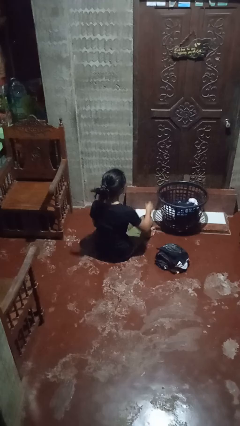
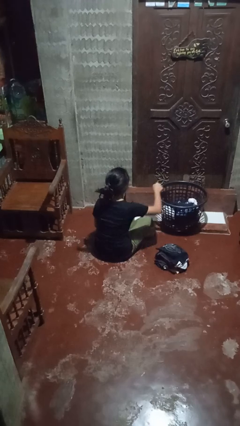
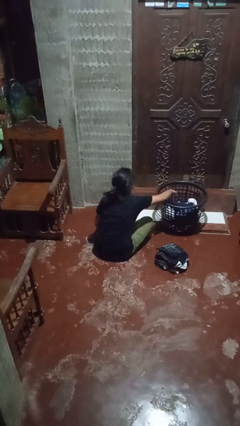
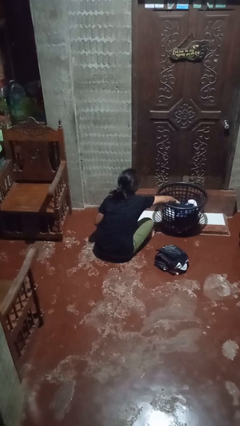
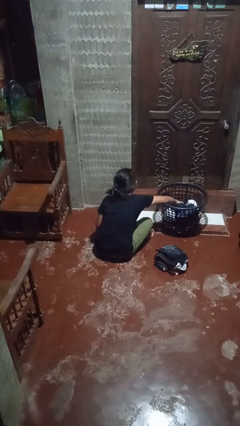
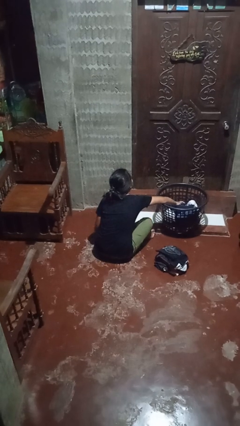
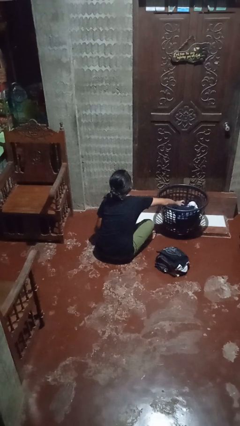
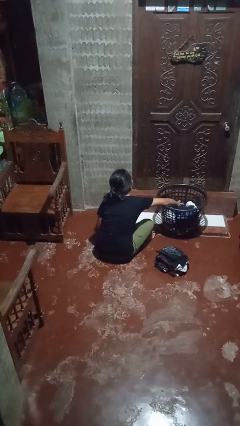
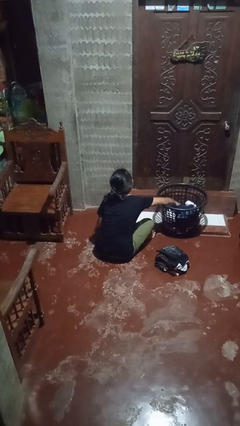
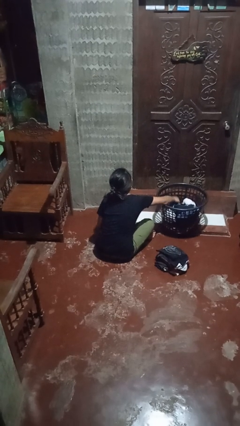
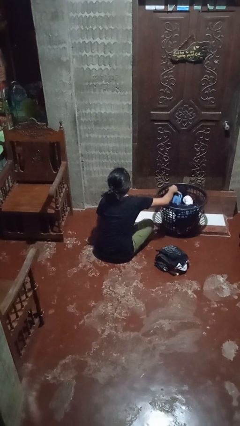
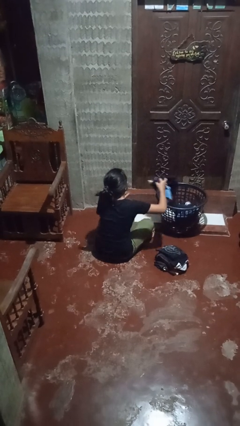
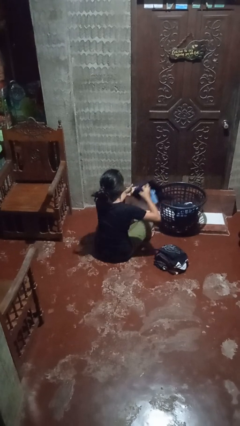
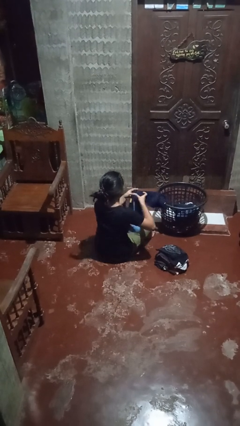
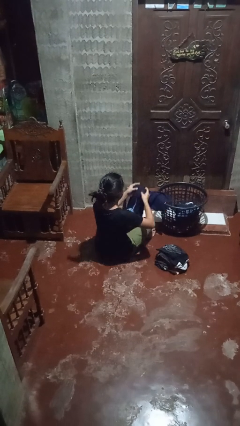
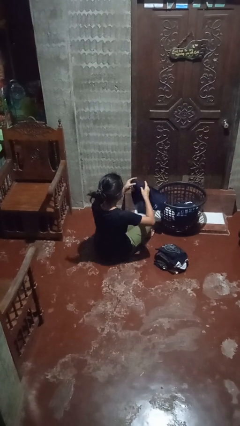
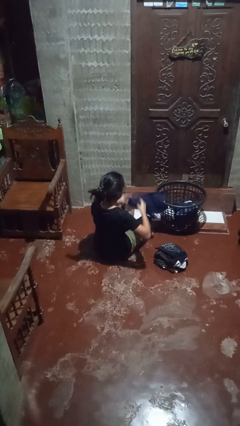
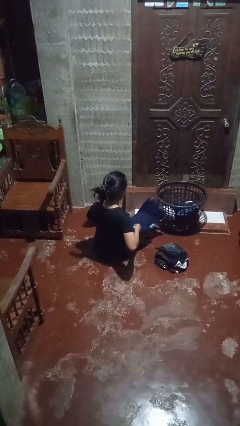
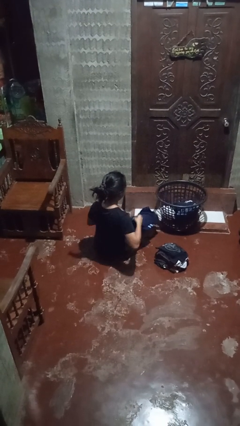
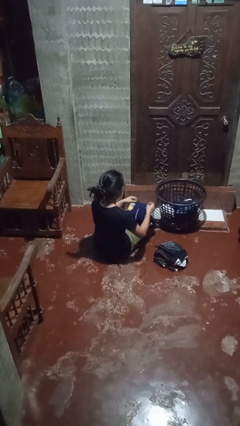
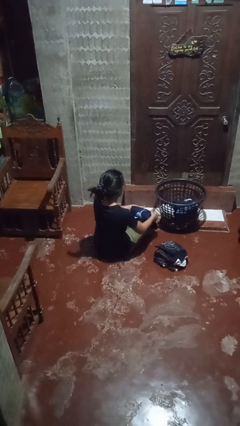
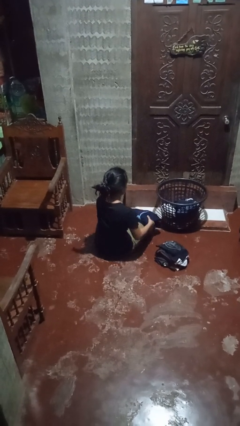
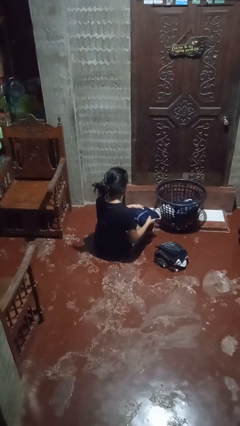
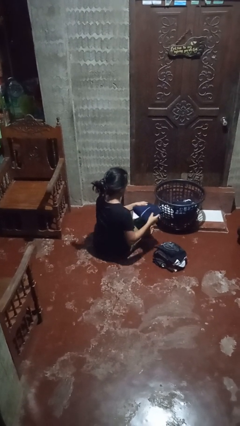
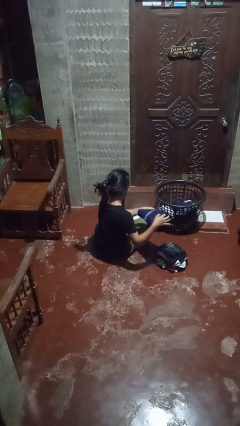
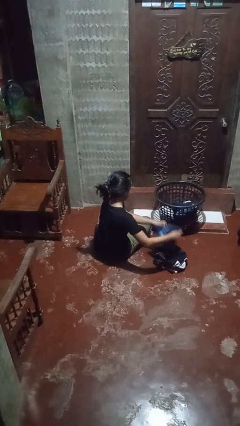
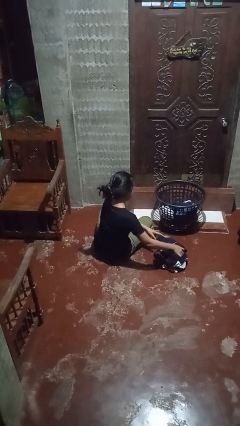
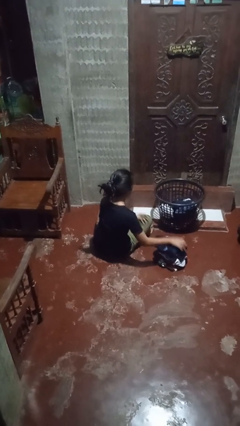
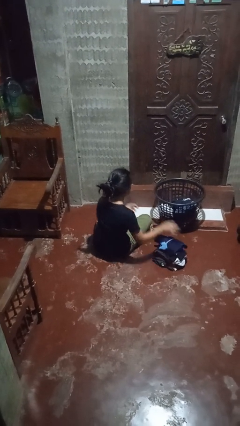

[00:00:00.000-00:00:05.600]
person folds shirt

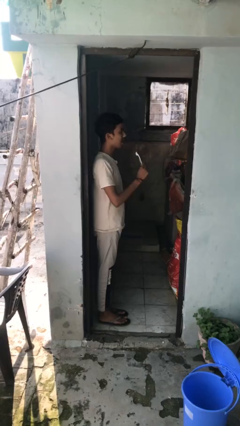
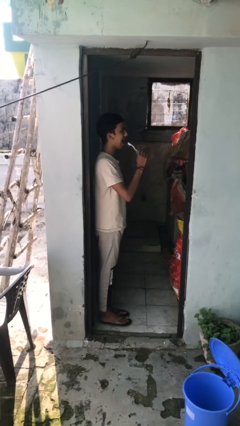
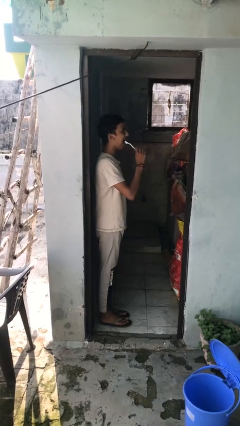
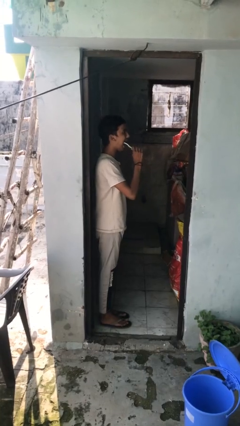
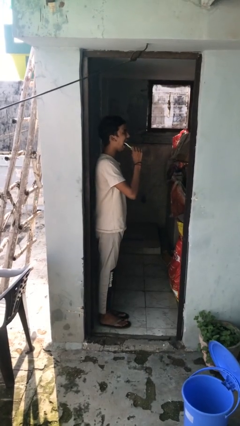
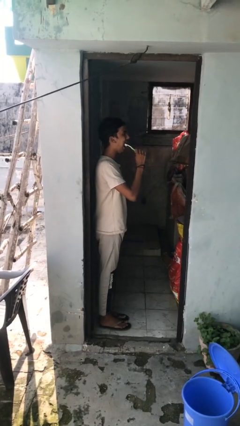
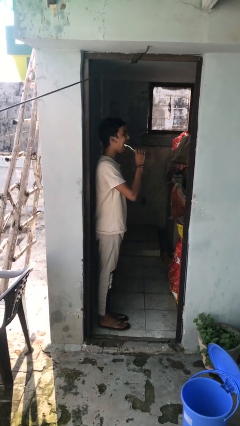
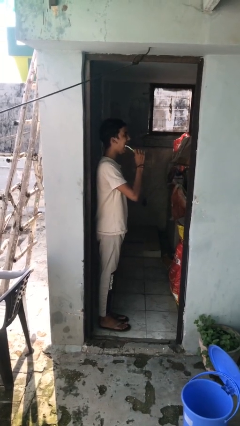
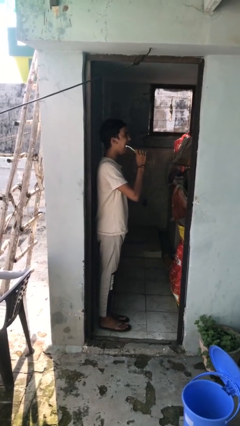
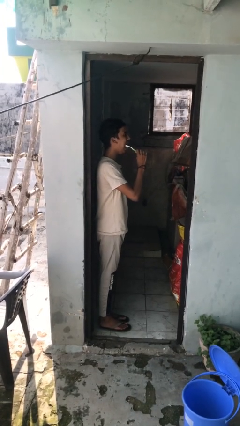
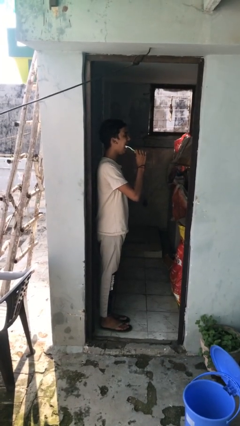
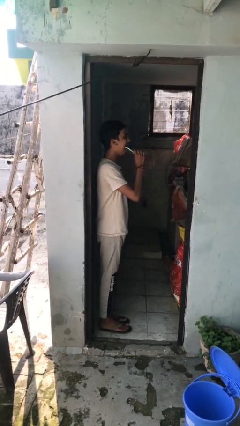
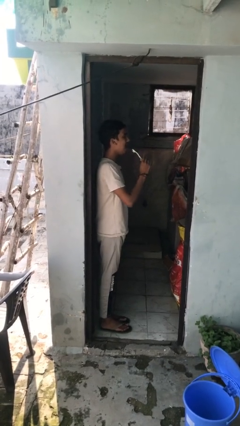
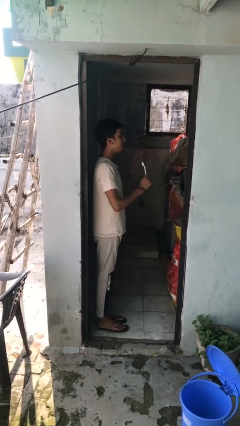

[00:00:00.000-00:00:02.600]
person brushes teeth

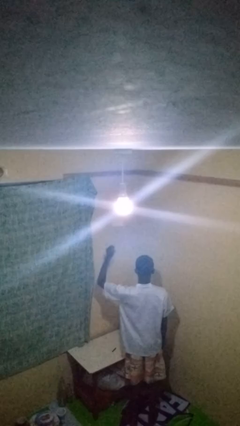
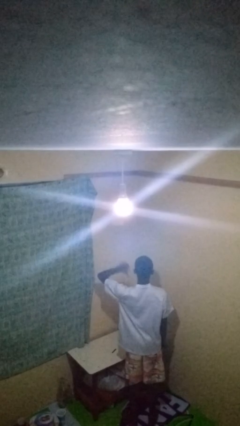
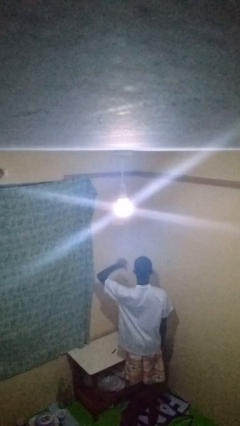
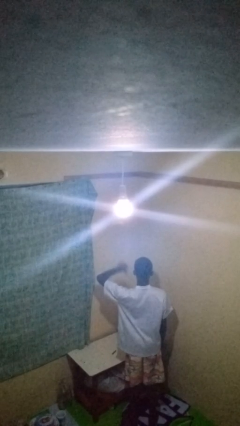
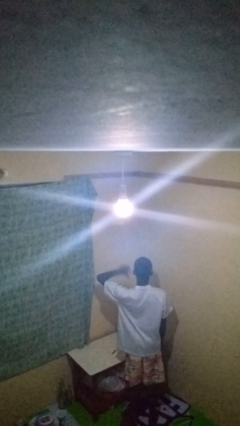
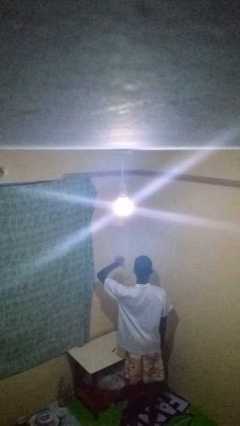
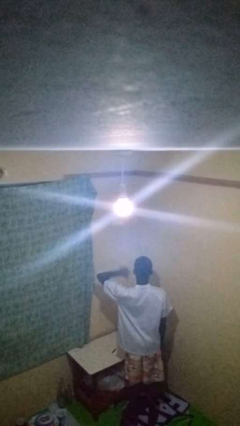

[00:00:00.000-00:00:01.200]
person gestures behind me

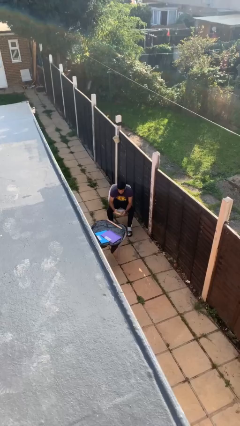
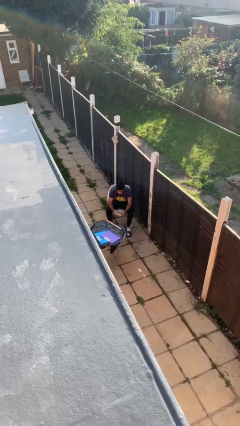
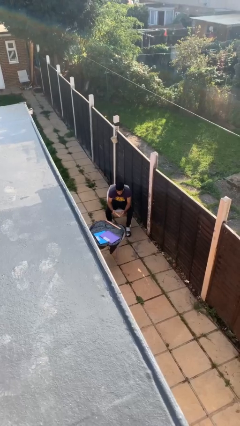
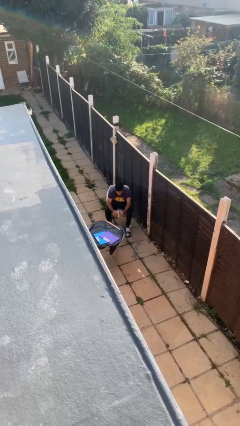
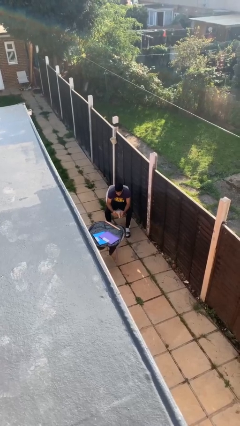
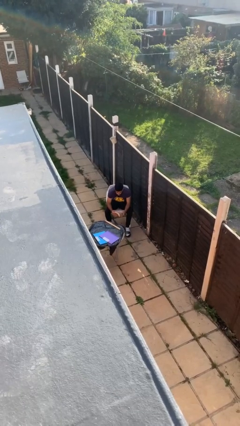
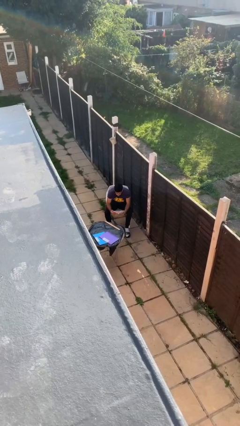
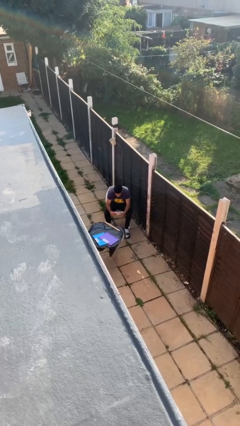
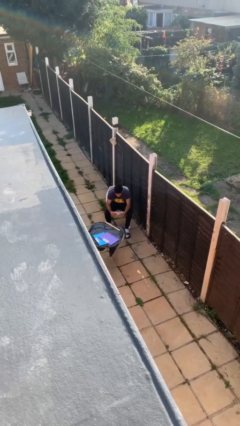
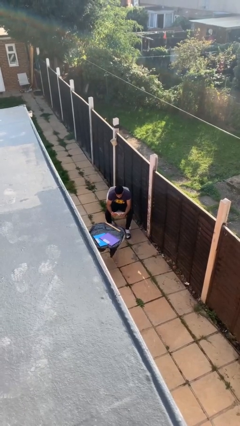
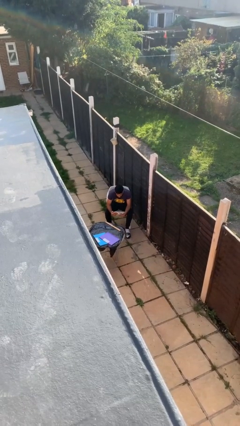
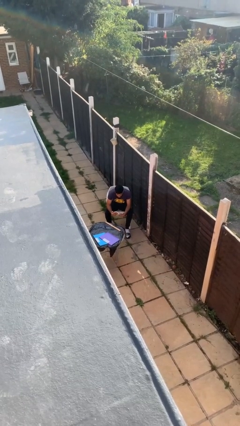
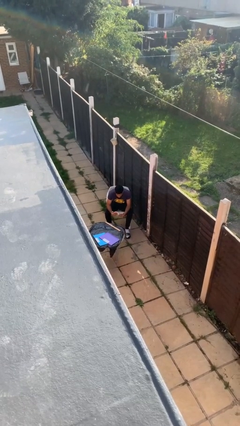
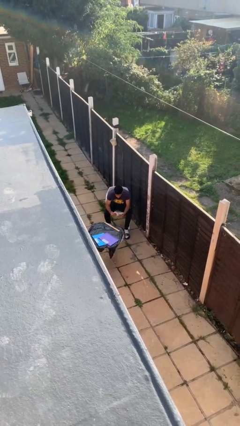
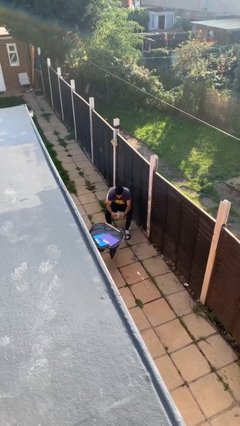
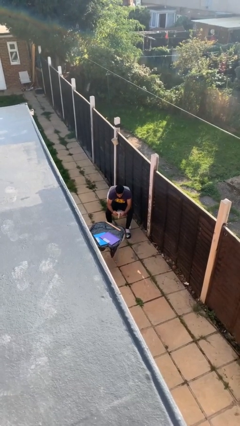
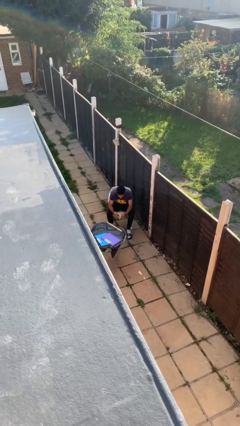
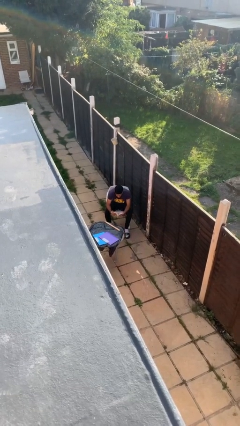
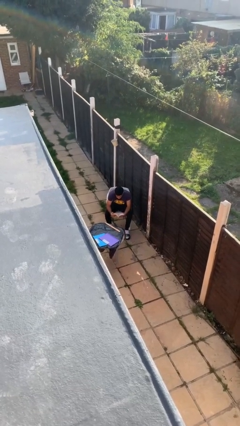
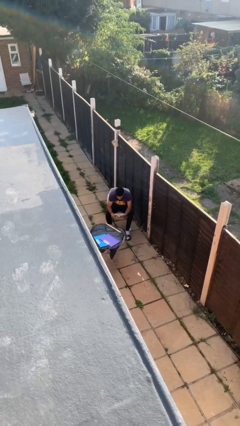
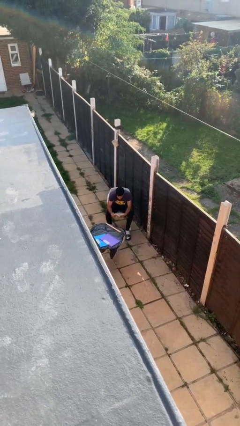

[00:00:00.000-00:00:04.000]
person reads document

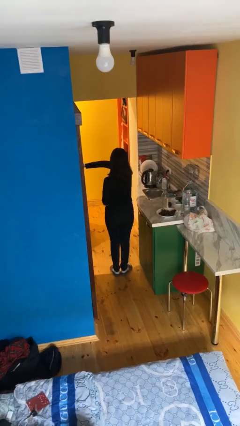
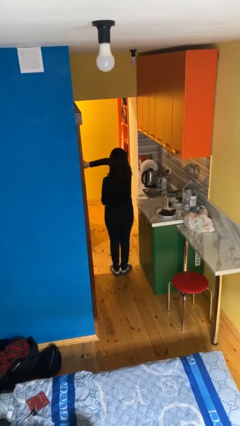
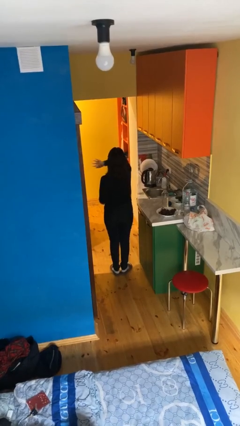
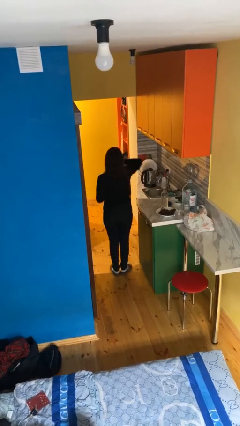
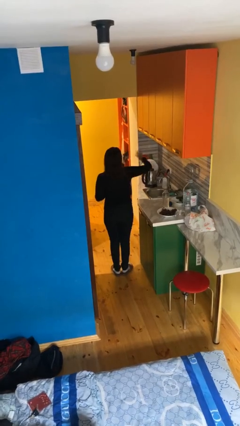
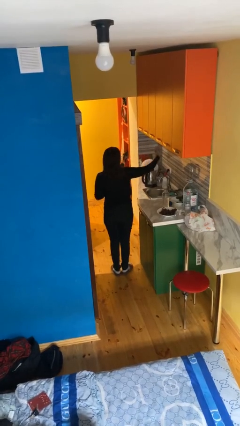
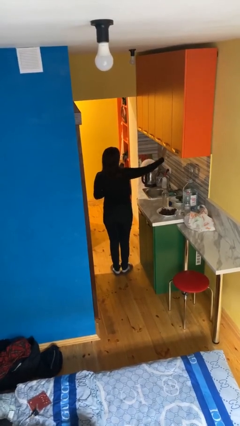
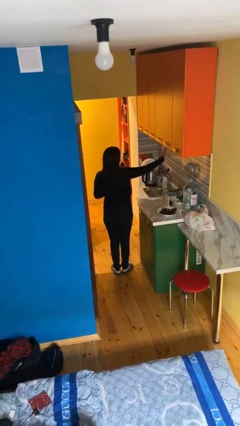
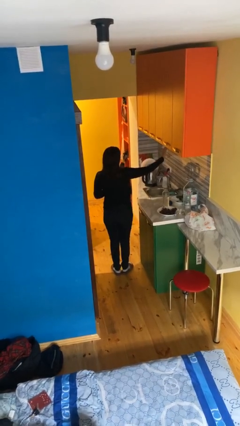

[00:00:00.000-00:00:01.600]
person gestures swipe right

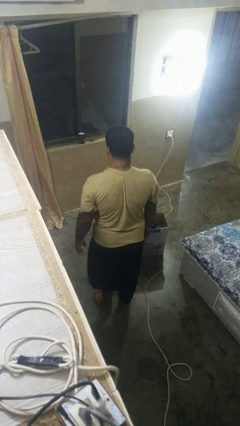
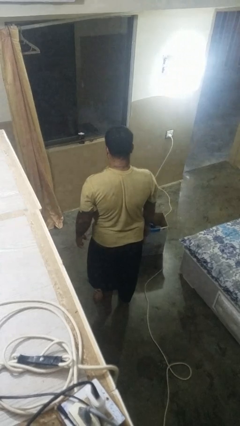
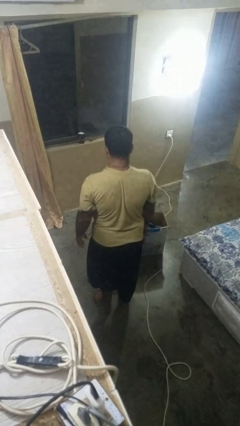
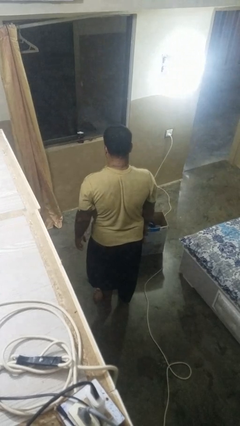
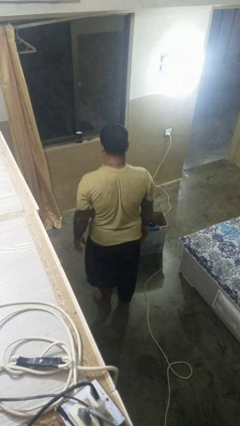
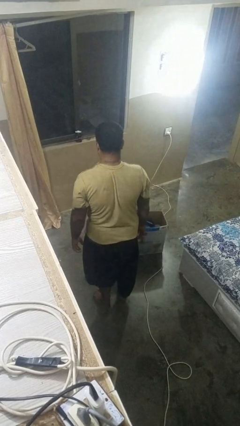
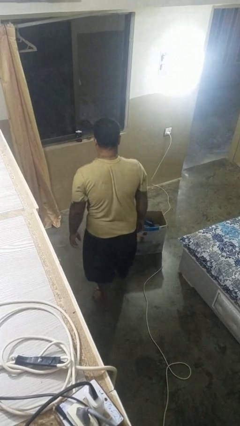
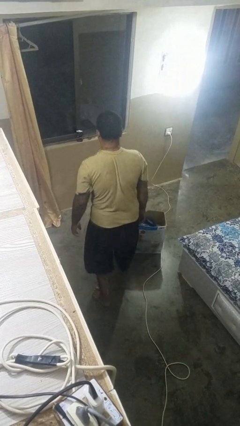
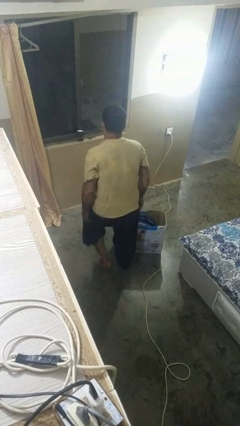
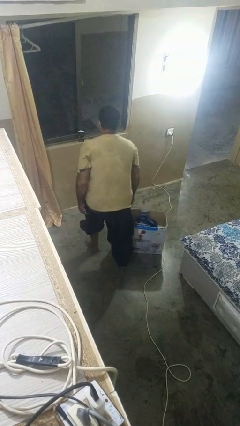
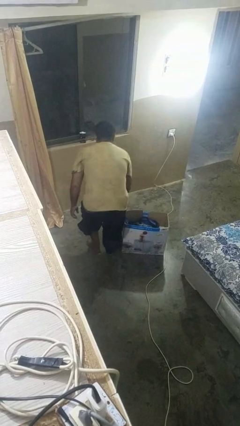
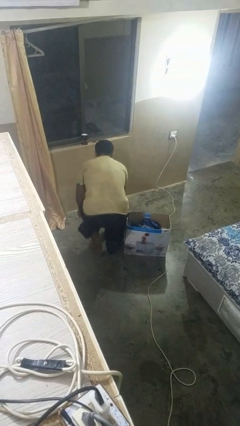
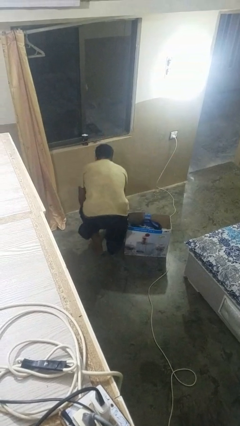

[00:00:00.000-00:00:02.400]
person trips on object on floor
